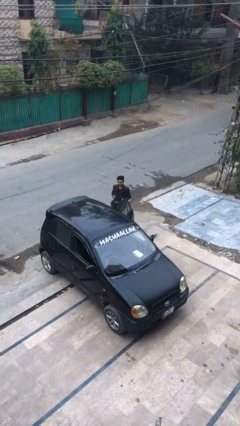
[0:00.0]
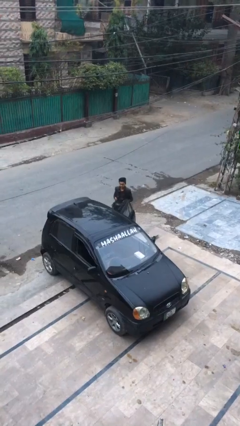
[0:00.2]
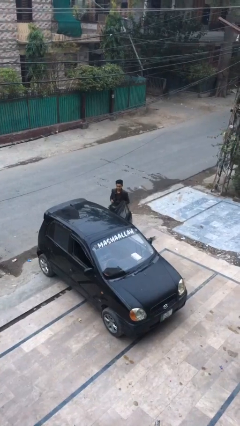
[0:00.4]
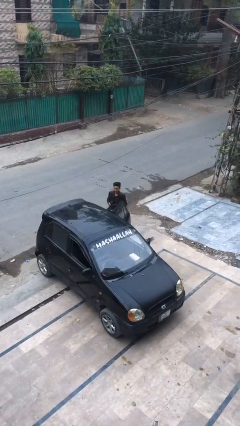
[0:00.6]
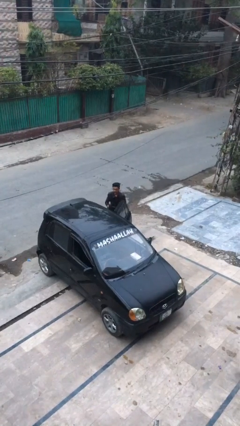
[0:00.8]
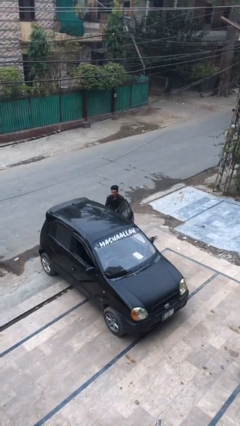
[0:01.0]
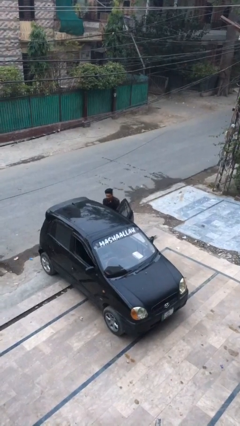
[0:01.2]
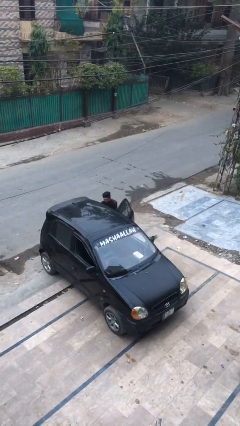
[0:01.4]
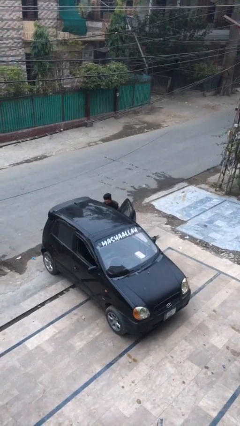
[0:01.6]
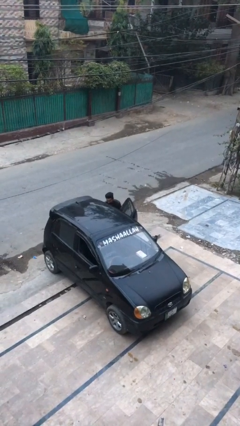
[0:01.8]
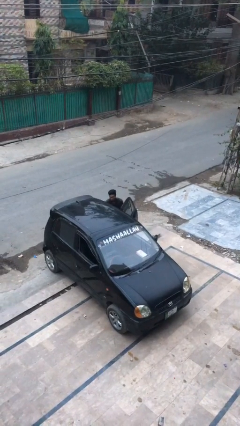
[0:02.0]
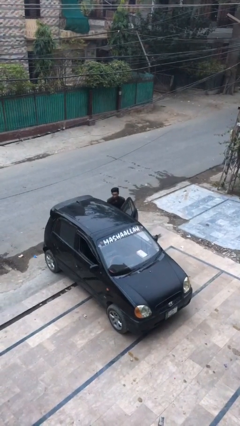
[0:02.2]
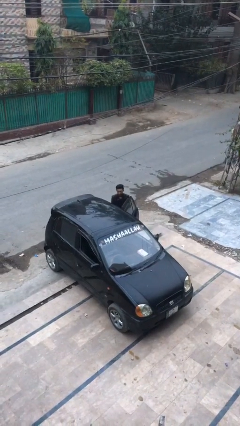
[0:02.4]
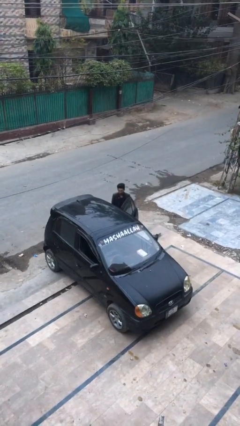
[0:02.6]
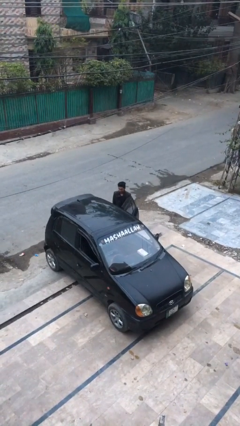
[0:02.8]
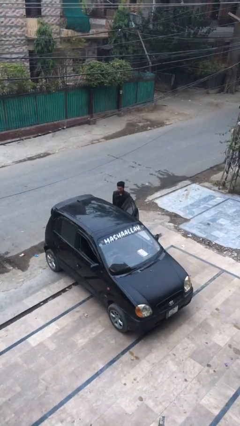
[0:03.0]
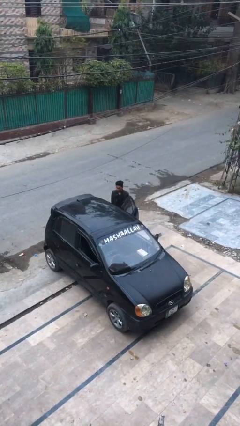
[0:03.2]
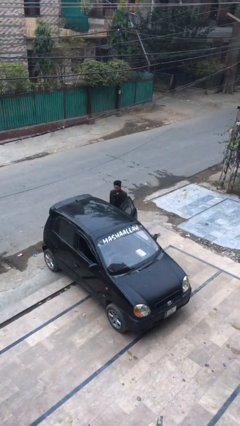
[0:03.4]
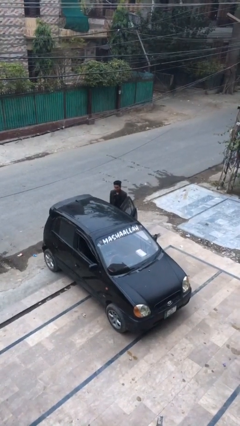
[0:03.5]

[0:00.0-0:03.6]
person loads car

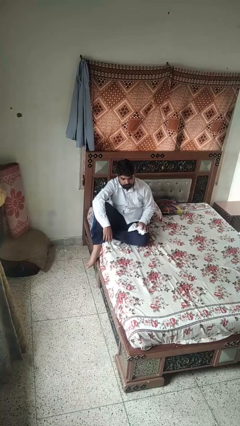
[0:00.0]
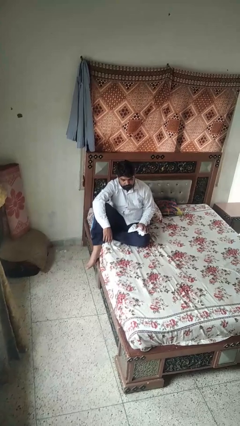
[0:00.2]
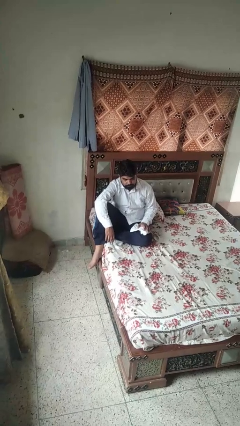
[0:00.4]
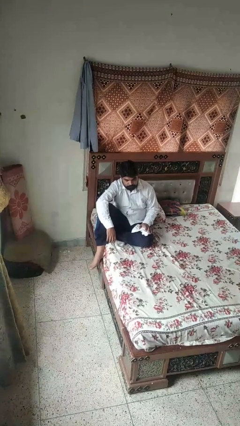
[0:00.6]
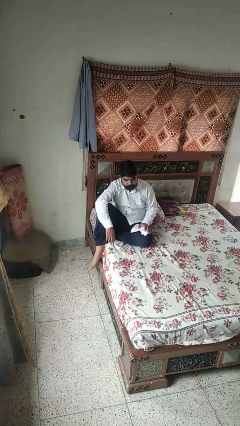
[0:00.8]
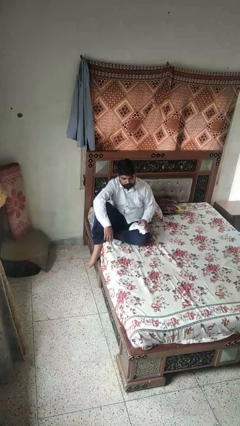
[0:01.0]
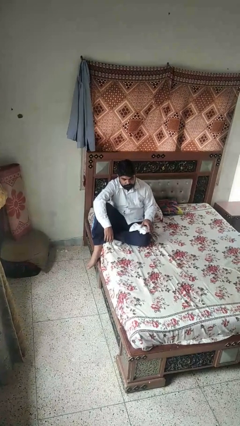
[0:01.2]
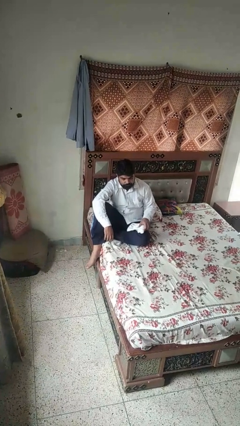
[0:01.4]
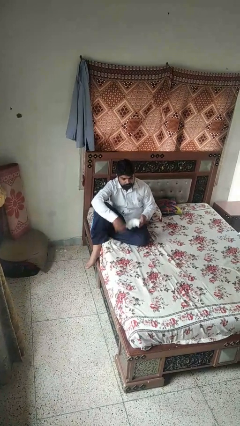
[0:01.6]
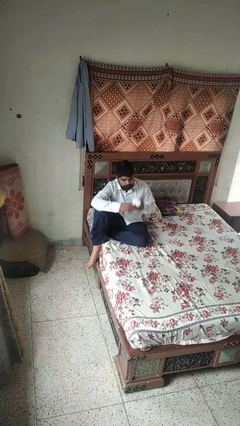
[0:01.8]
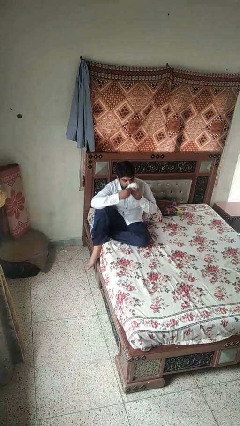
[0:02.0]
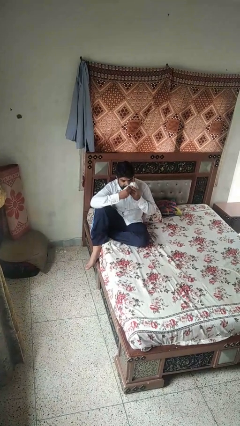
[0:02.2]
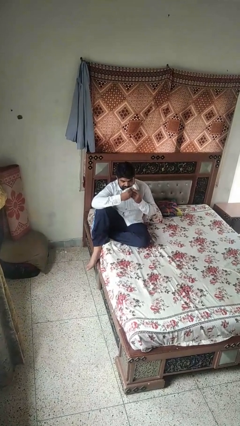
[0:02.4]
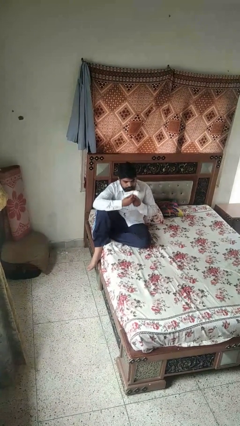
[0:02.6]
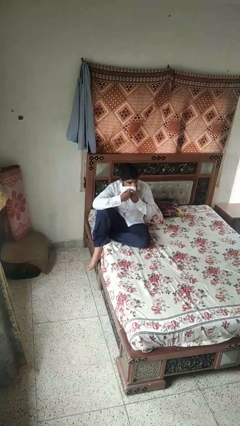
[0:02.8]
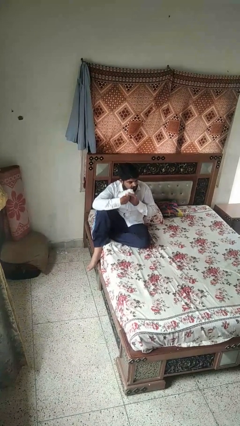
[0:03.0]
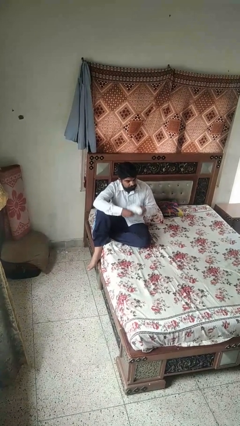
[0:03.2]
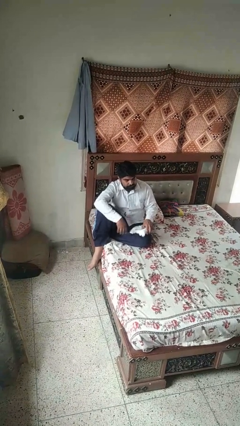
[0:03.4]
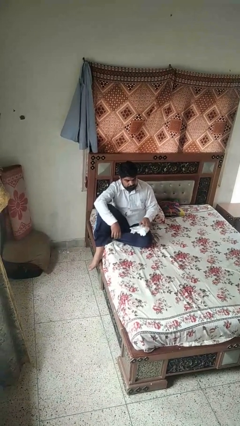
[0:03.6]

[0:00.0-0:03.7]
person wipes mouth with napkin

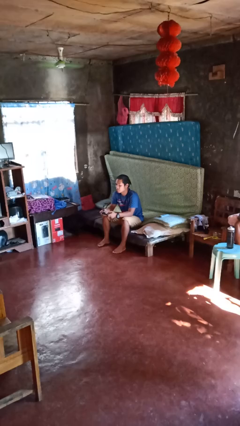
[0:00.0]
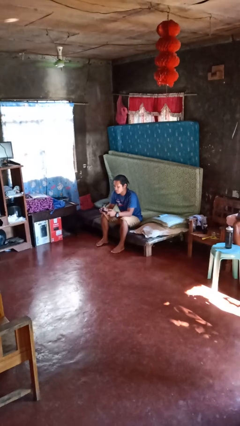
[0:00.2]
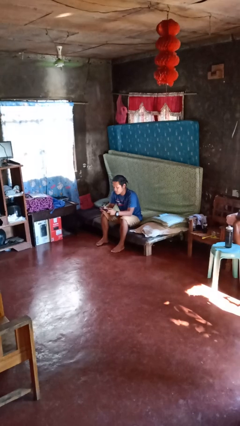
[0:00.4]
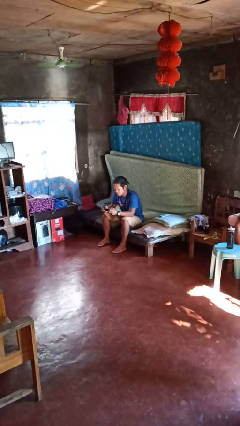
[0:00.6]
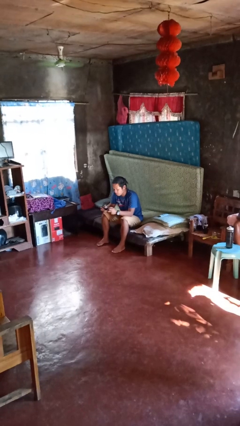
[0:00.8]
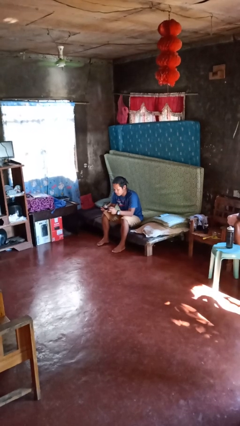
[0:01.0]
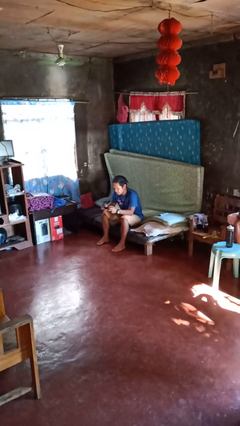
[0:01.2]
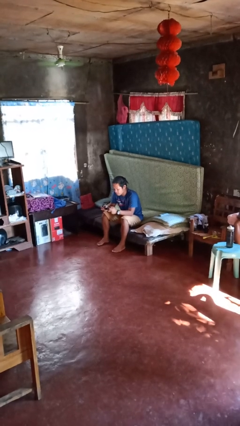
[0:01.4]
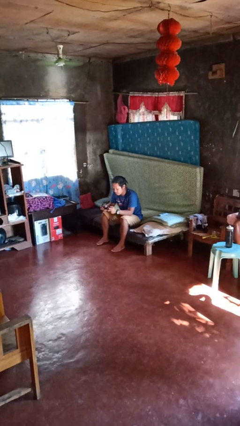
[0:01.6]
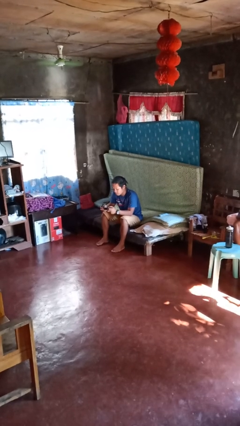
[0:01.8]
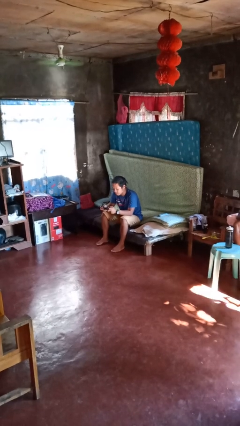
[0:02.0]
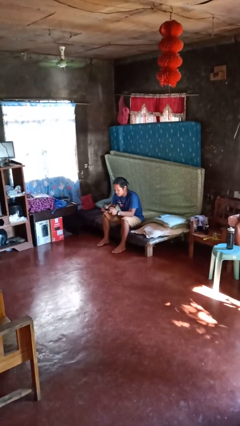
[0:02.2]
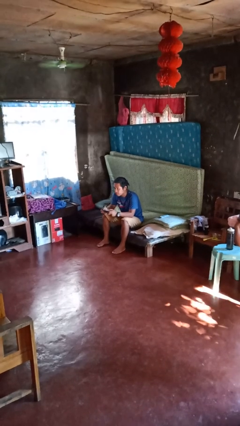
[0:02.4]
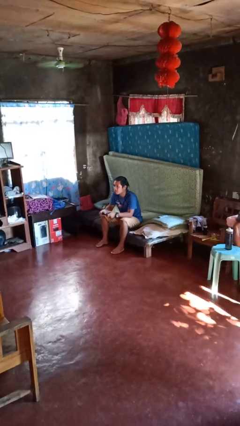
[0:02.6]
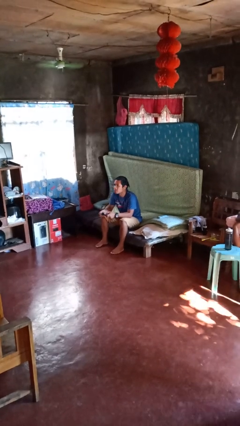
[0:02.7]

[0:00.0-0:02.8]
person interacts with handheld game

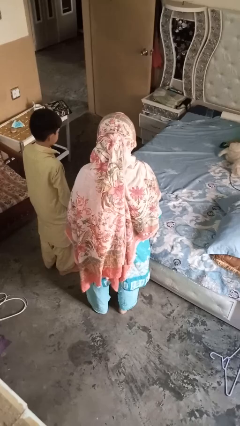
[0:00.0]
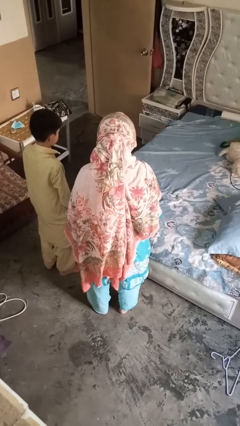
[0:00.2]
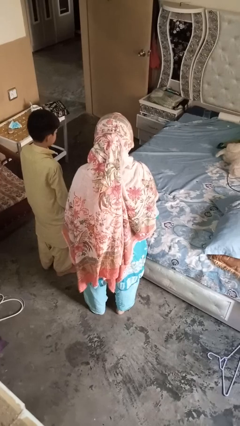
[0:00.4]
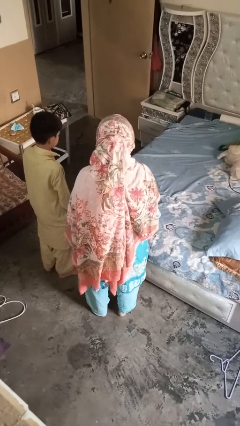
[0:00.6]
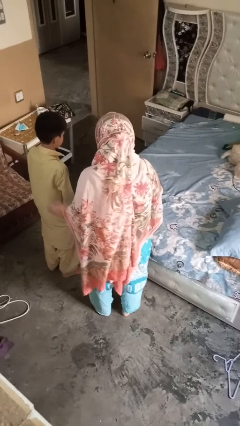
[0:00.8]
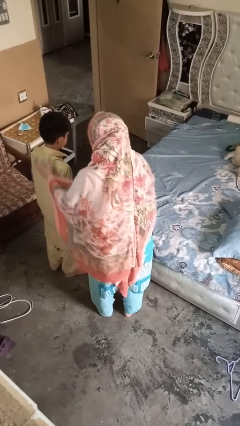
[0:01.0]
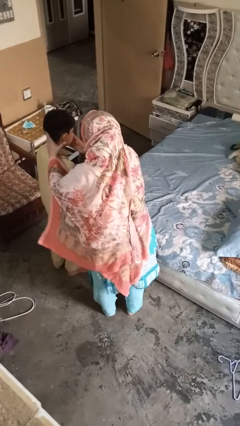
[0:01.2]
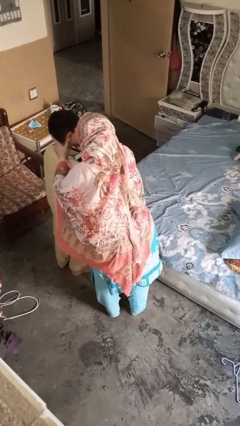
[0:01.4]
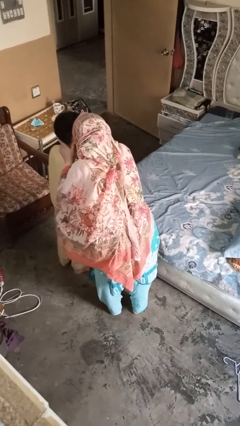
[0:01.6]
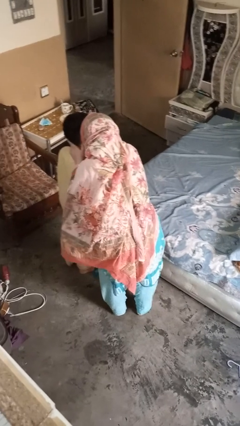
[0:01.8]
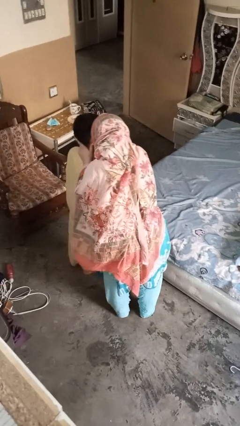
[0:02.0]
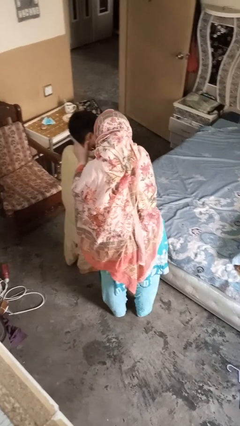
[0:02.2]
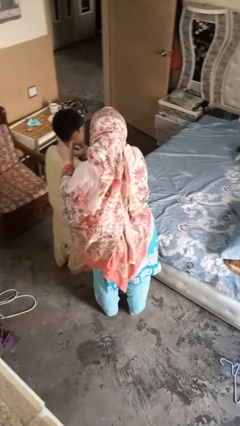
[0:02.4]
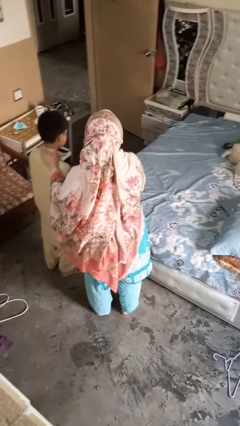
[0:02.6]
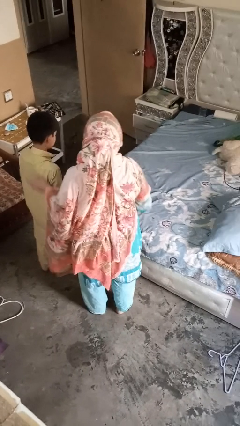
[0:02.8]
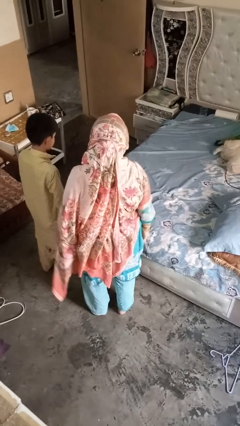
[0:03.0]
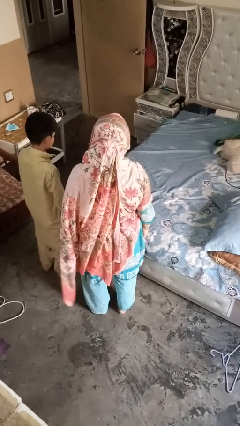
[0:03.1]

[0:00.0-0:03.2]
person gestures blow kiss

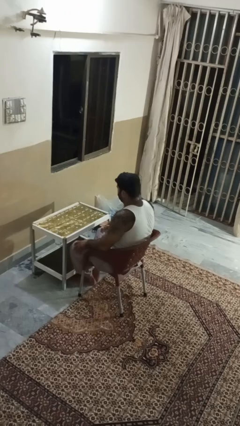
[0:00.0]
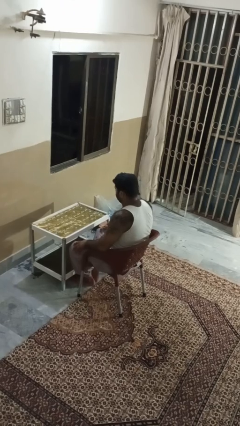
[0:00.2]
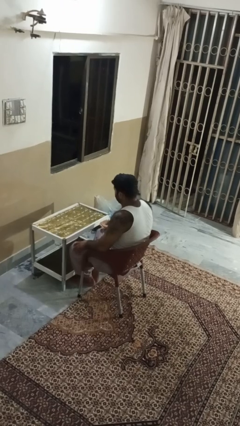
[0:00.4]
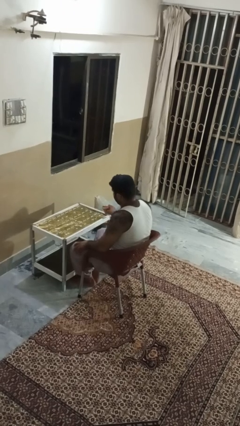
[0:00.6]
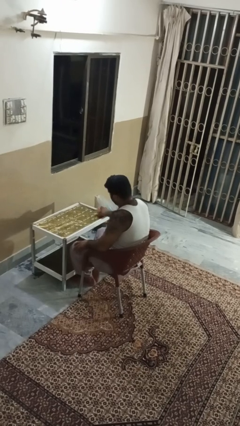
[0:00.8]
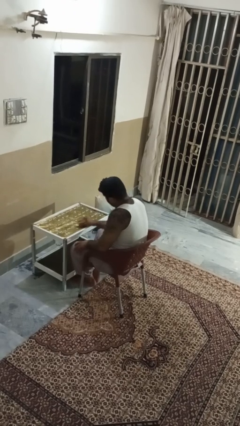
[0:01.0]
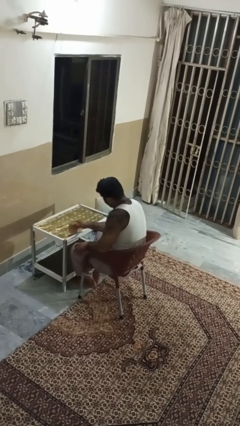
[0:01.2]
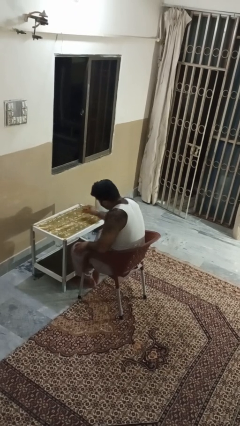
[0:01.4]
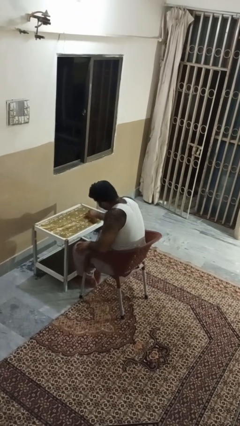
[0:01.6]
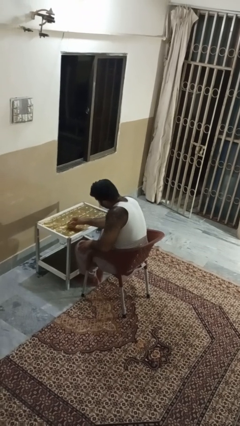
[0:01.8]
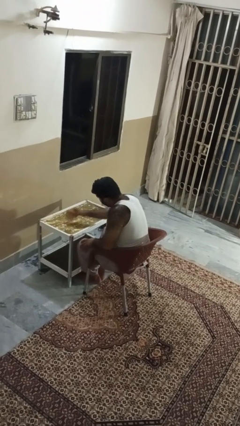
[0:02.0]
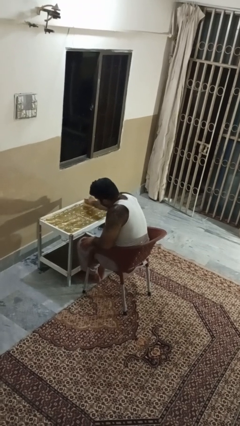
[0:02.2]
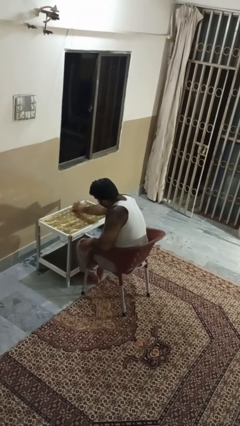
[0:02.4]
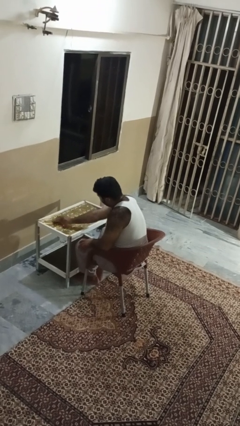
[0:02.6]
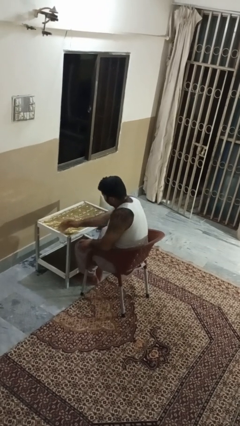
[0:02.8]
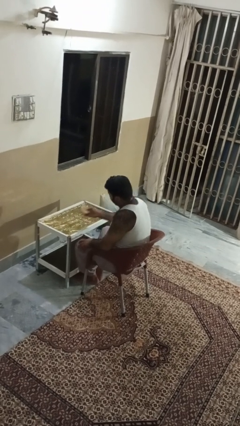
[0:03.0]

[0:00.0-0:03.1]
person cleans table with rag

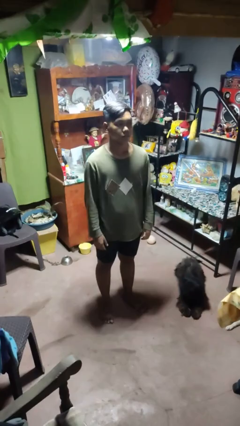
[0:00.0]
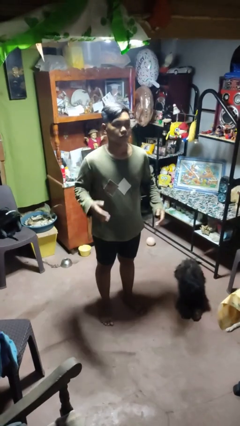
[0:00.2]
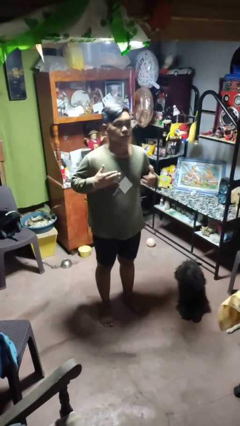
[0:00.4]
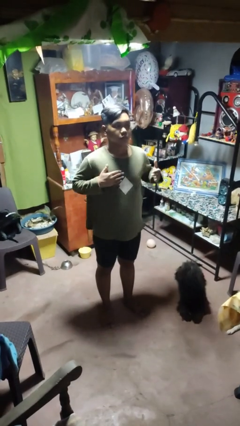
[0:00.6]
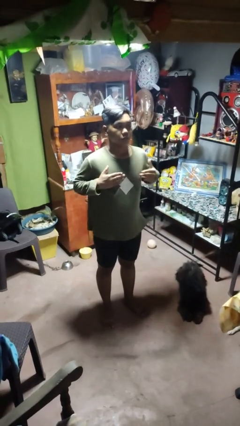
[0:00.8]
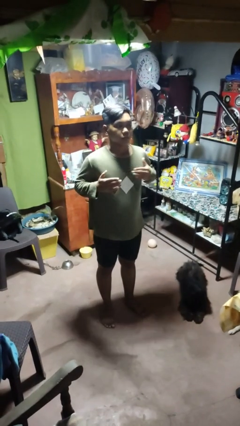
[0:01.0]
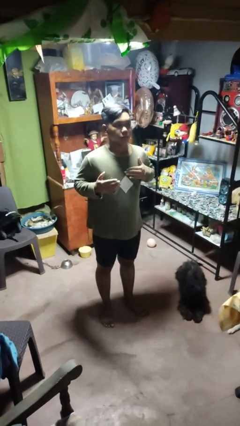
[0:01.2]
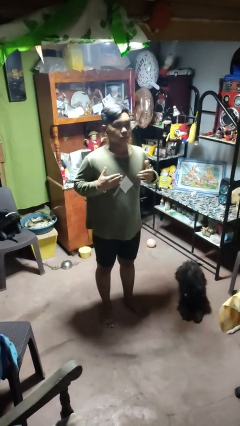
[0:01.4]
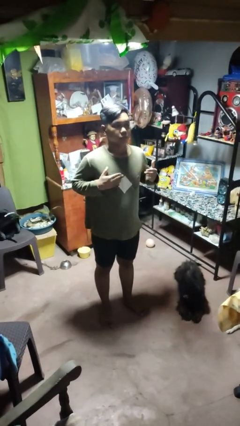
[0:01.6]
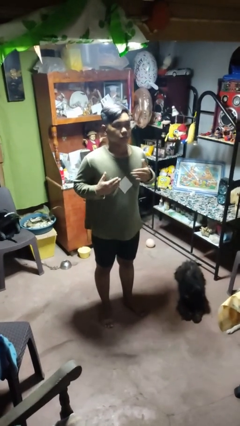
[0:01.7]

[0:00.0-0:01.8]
person drums on chest
